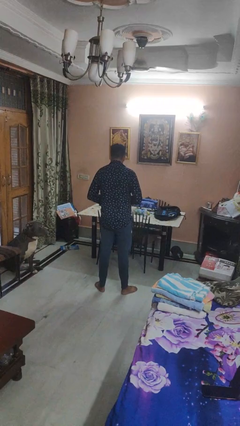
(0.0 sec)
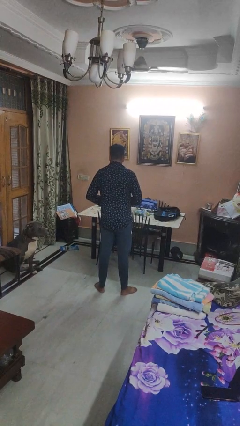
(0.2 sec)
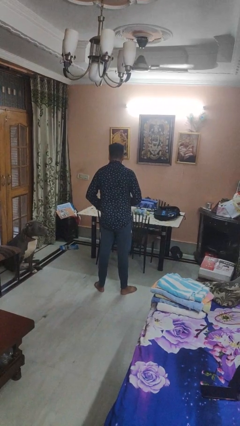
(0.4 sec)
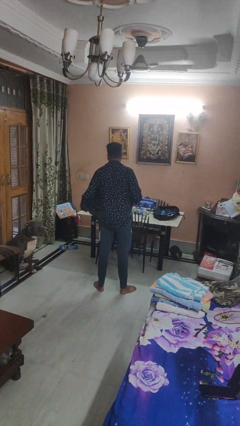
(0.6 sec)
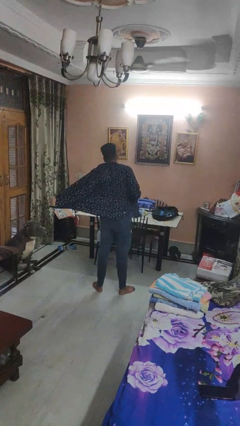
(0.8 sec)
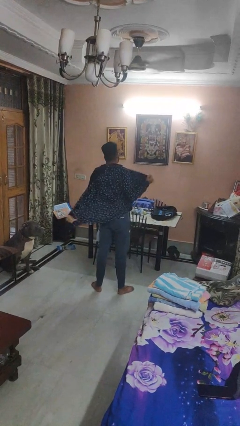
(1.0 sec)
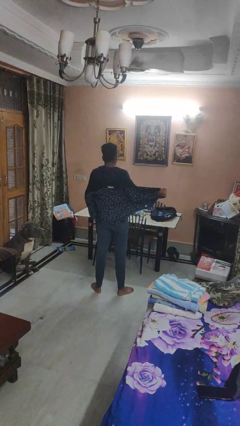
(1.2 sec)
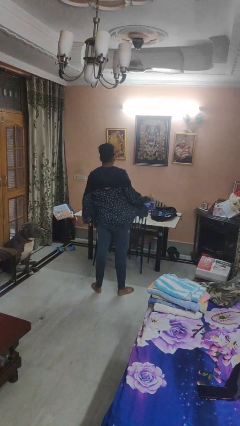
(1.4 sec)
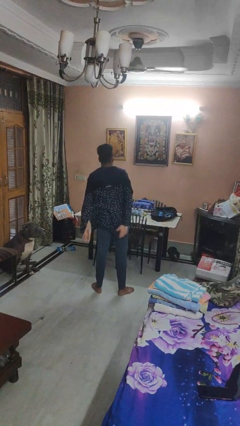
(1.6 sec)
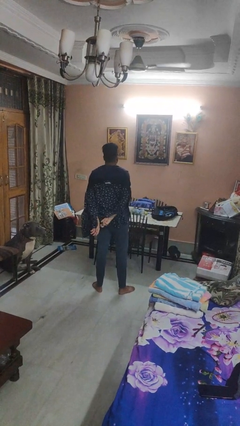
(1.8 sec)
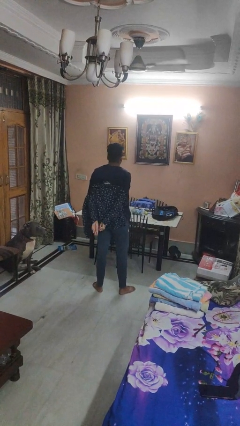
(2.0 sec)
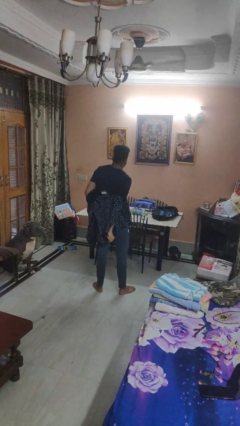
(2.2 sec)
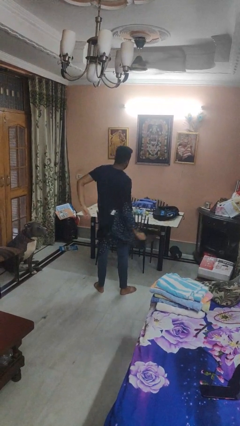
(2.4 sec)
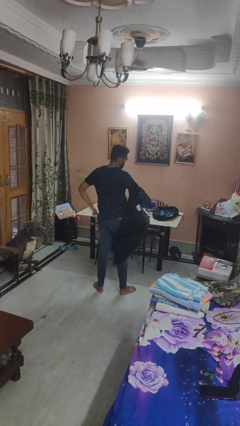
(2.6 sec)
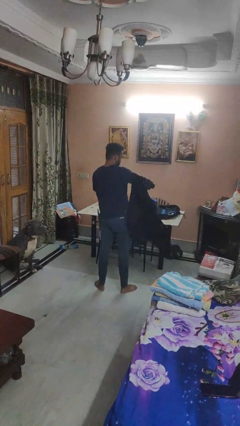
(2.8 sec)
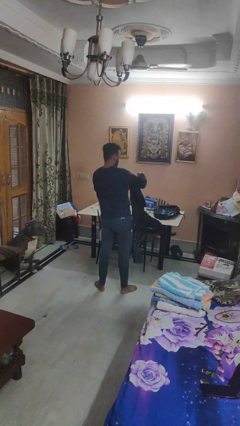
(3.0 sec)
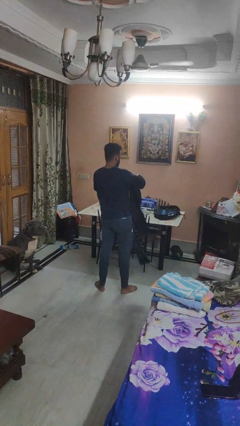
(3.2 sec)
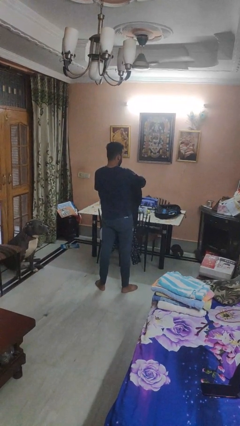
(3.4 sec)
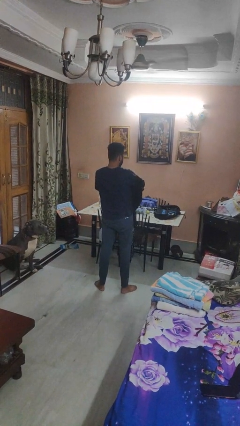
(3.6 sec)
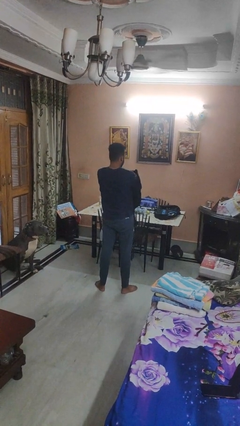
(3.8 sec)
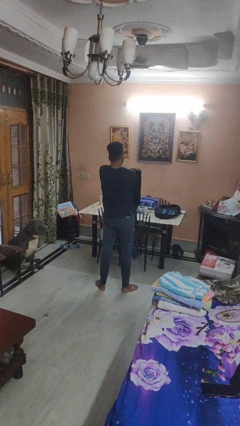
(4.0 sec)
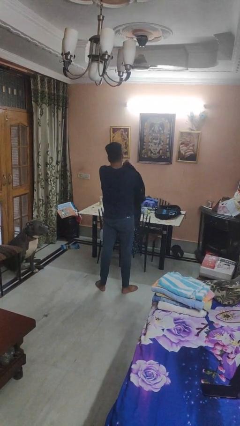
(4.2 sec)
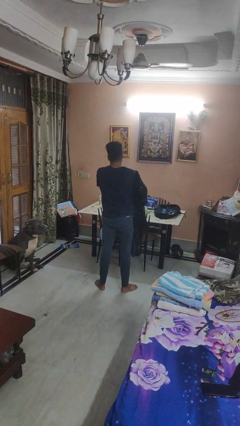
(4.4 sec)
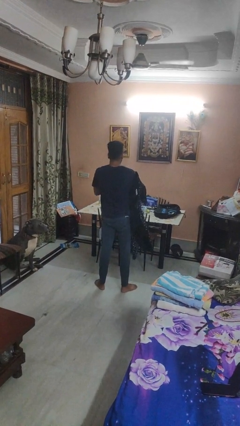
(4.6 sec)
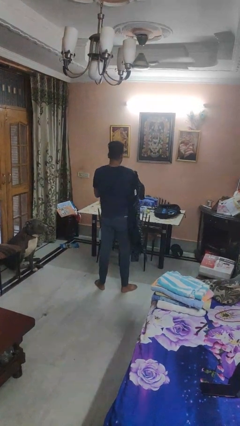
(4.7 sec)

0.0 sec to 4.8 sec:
person takes off shirt

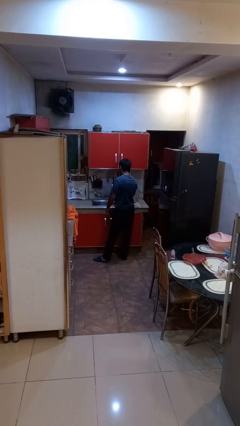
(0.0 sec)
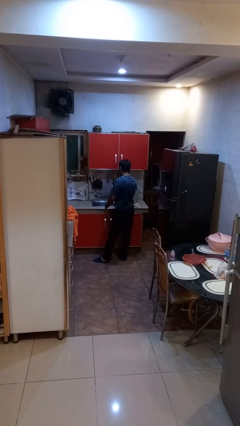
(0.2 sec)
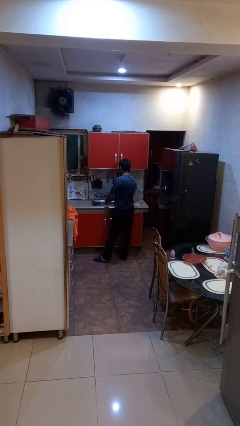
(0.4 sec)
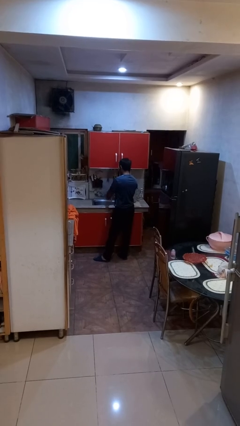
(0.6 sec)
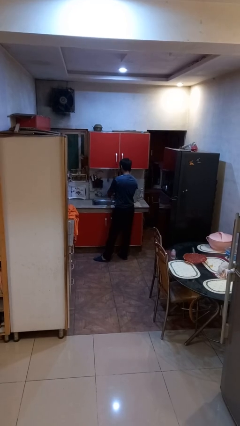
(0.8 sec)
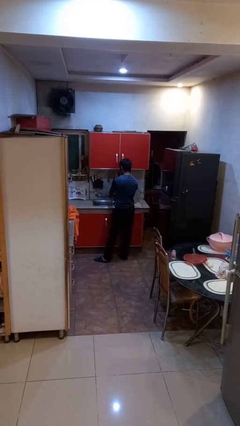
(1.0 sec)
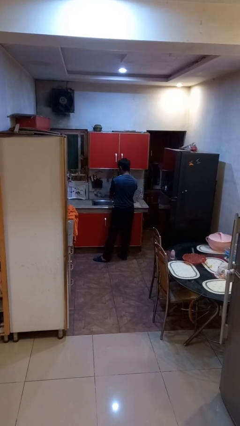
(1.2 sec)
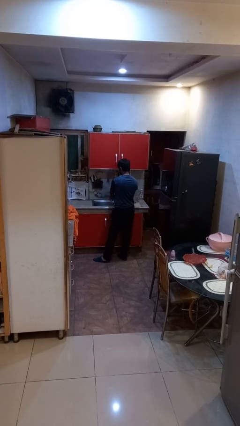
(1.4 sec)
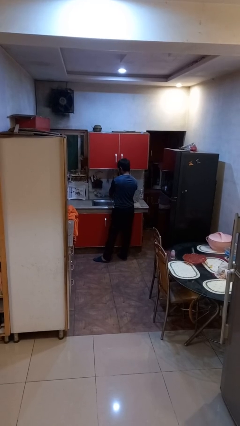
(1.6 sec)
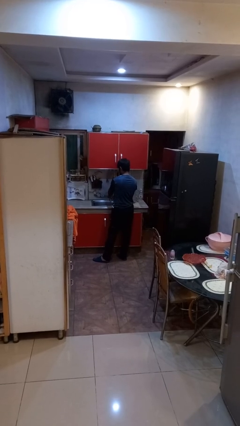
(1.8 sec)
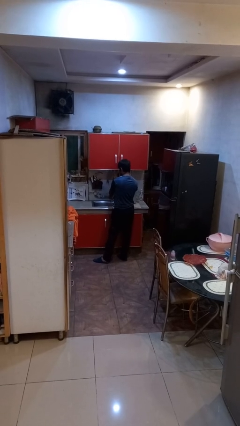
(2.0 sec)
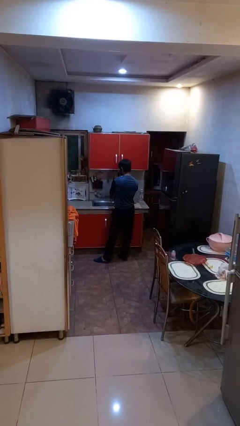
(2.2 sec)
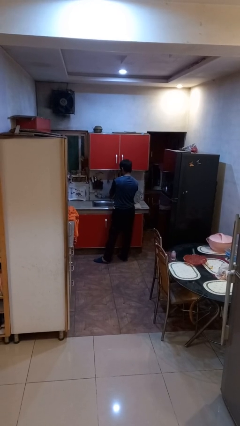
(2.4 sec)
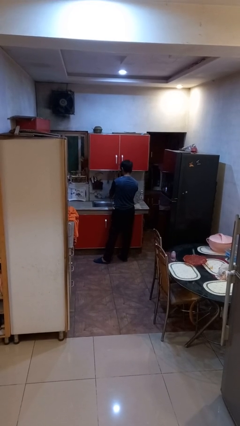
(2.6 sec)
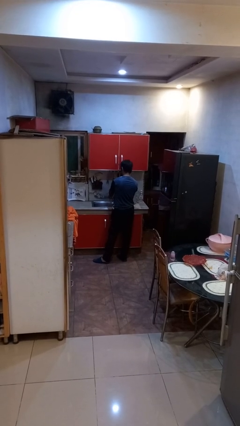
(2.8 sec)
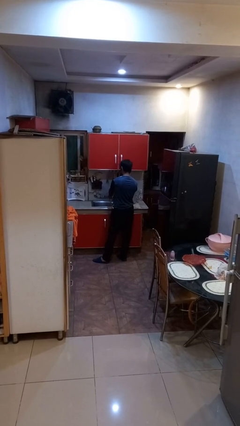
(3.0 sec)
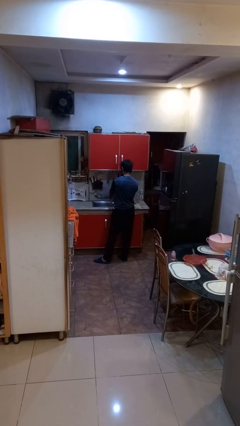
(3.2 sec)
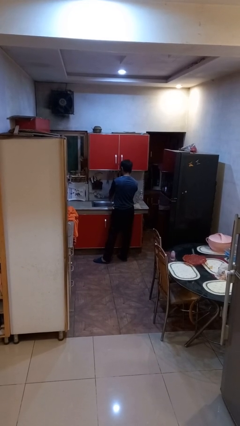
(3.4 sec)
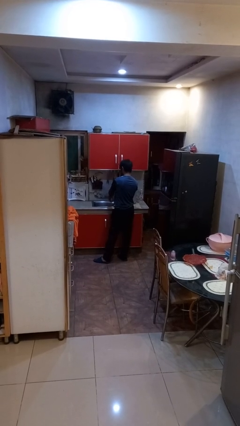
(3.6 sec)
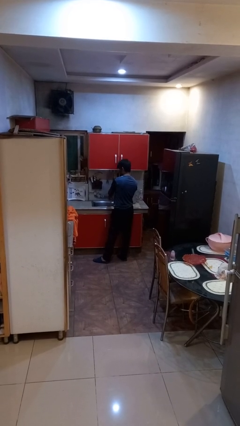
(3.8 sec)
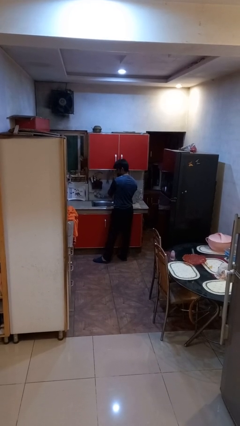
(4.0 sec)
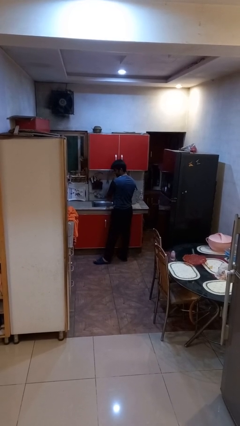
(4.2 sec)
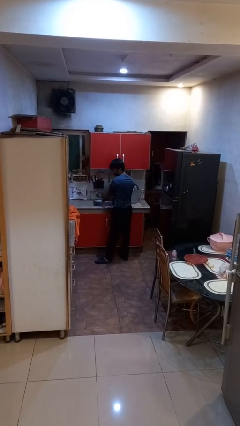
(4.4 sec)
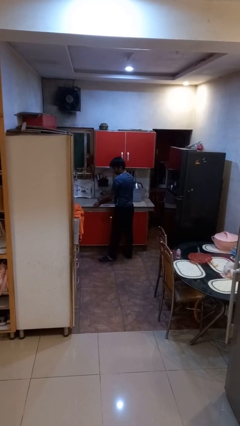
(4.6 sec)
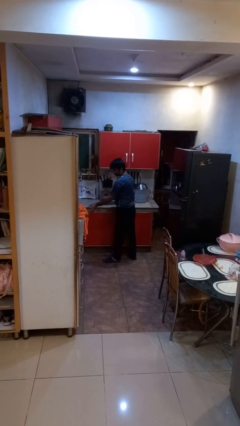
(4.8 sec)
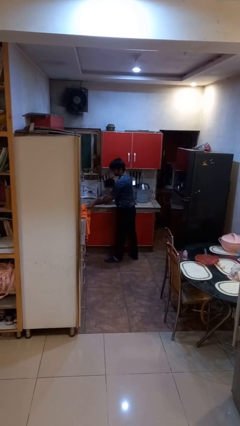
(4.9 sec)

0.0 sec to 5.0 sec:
person washes hands

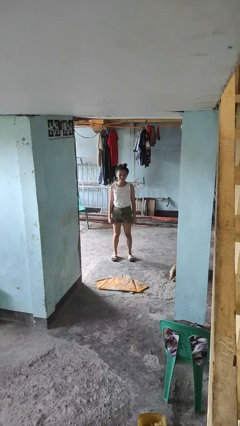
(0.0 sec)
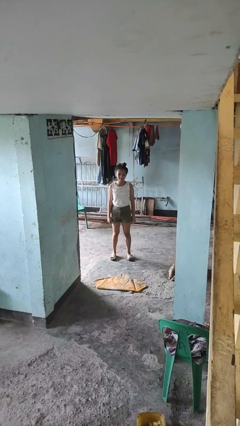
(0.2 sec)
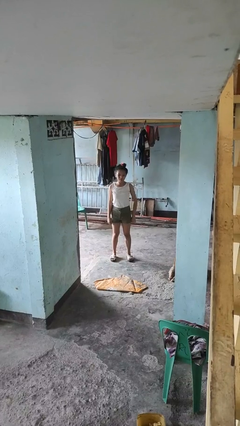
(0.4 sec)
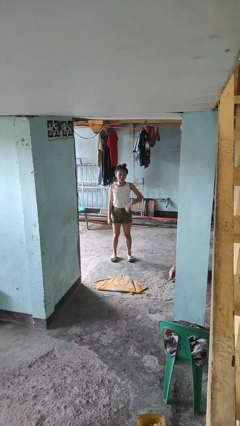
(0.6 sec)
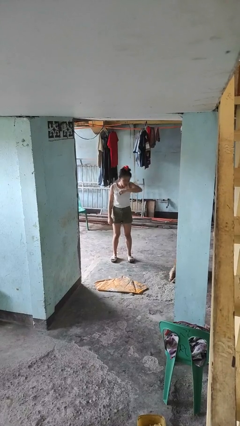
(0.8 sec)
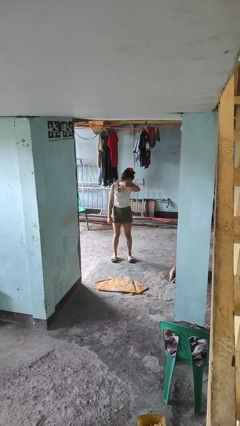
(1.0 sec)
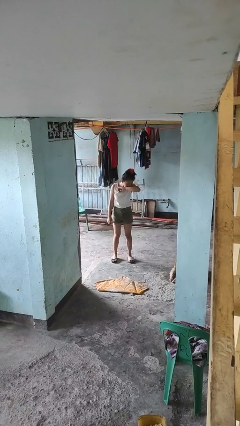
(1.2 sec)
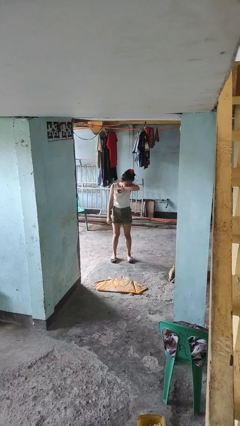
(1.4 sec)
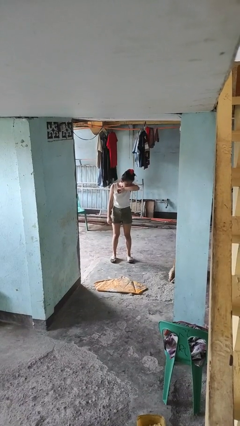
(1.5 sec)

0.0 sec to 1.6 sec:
person sneezes into arm

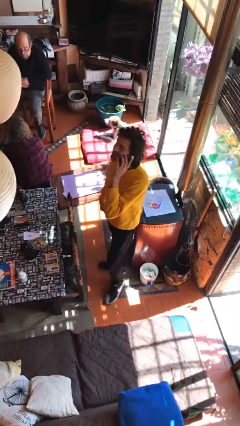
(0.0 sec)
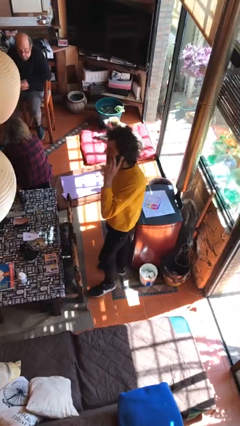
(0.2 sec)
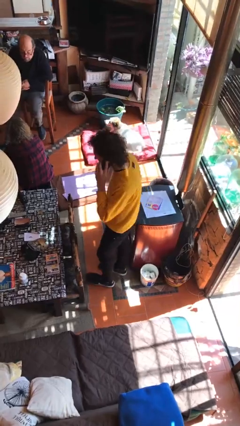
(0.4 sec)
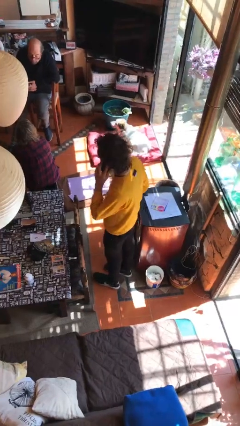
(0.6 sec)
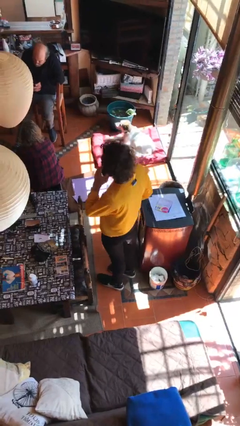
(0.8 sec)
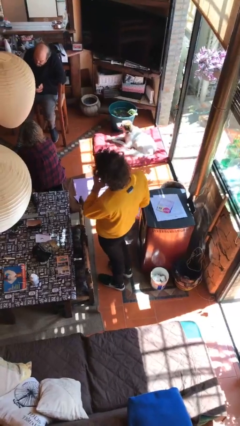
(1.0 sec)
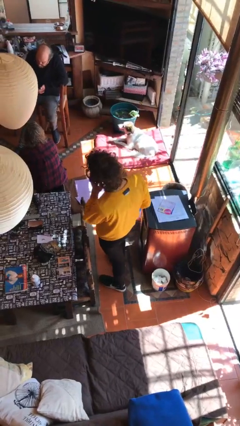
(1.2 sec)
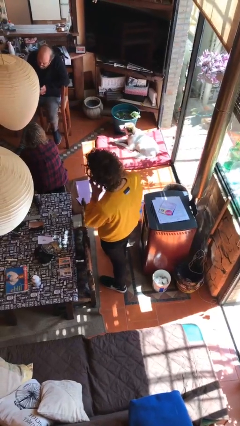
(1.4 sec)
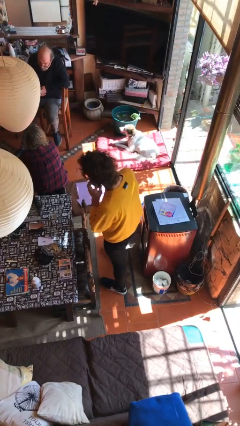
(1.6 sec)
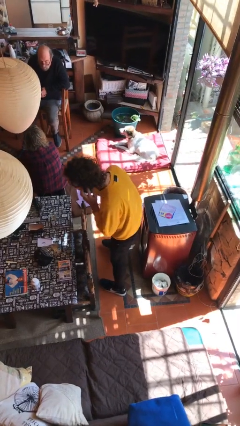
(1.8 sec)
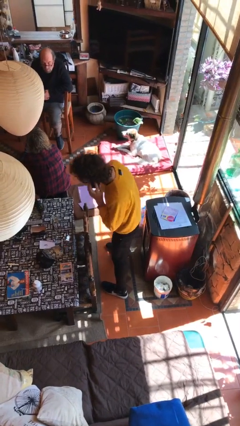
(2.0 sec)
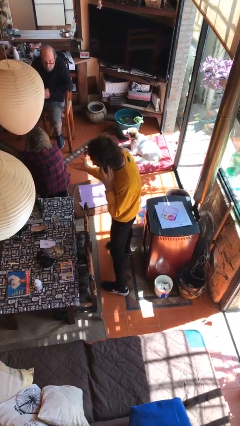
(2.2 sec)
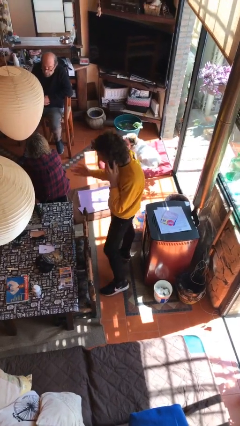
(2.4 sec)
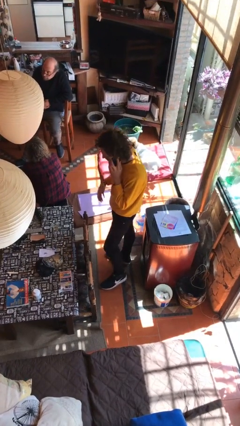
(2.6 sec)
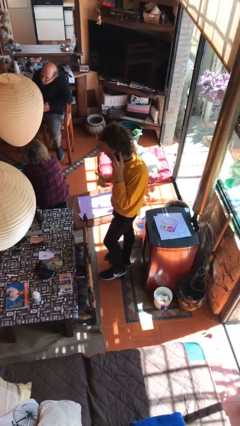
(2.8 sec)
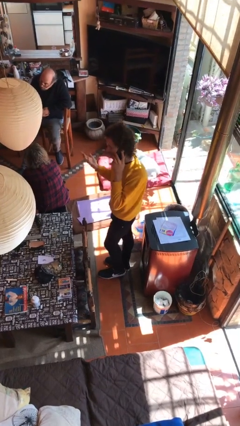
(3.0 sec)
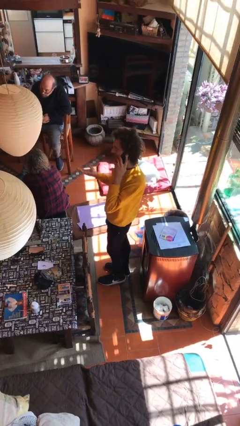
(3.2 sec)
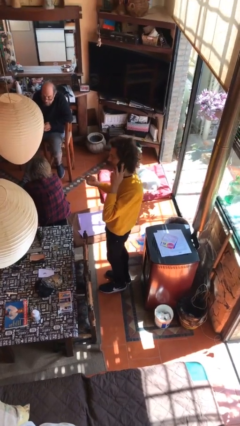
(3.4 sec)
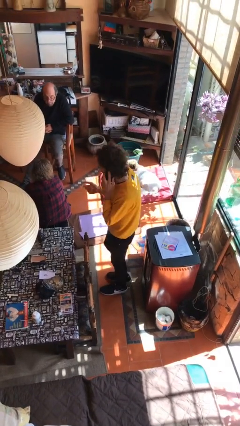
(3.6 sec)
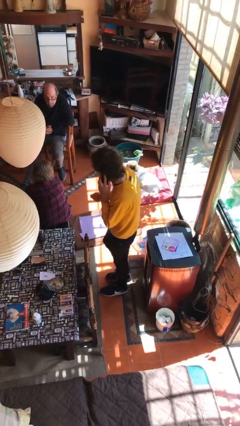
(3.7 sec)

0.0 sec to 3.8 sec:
person talks on phone

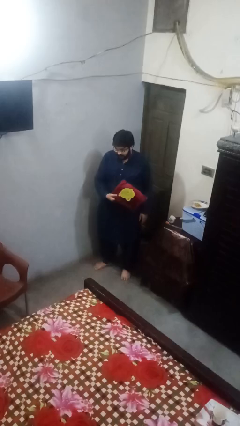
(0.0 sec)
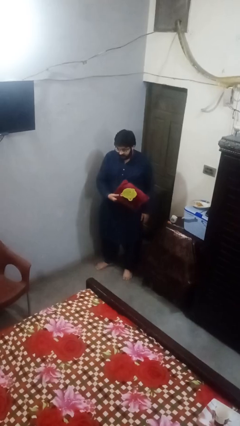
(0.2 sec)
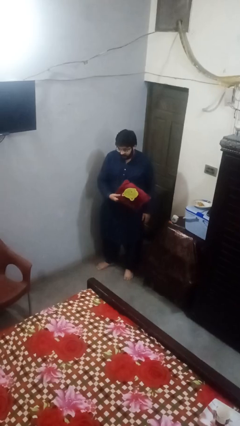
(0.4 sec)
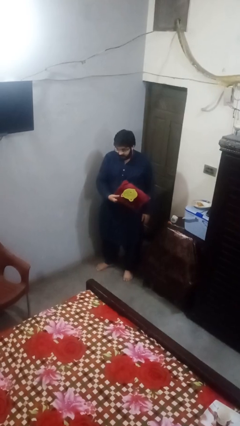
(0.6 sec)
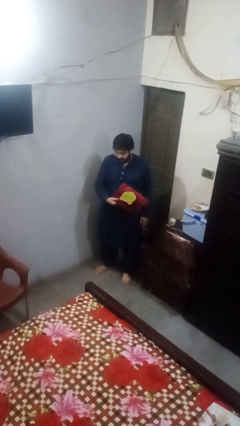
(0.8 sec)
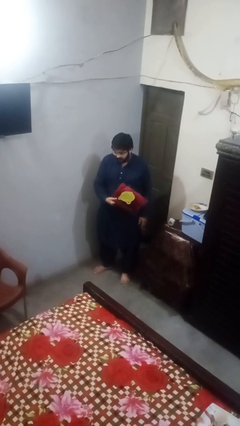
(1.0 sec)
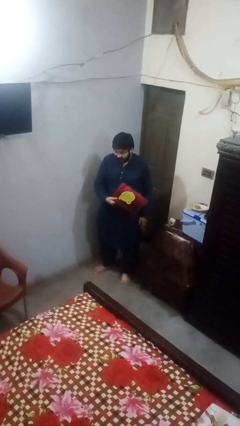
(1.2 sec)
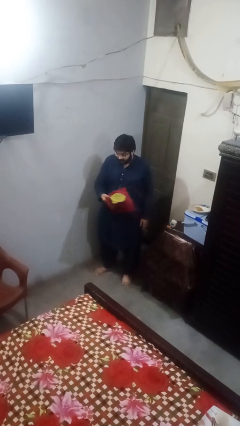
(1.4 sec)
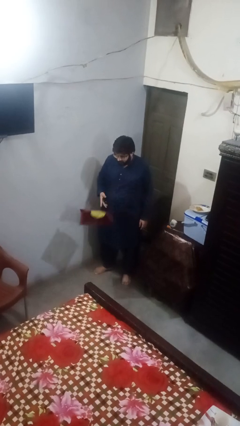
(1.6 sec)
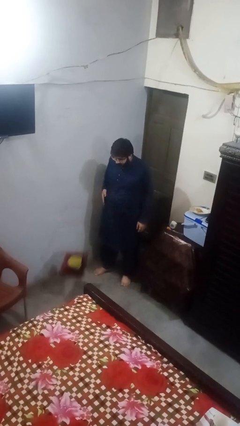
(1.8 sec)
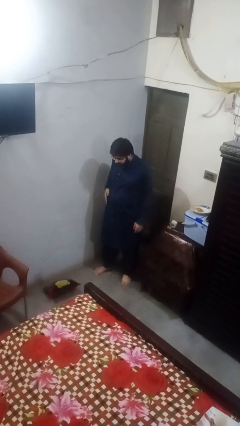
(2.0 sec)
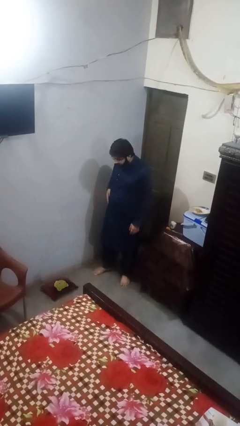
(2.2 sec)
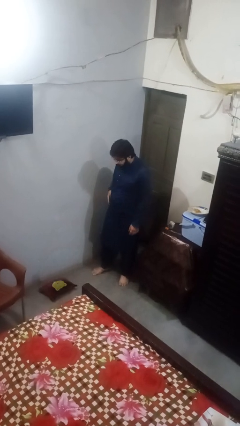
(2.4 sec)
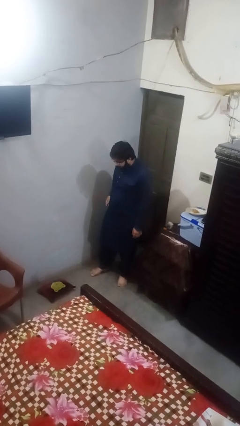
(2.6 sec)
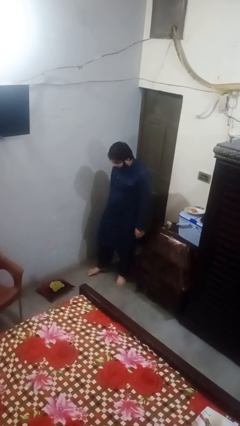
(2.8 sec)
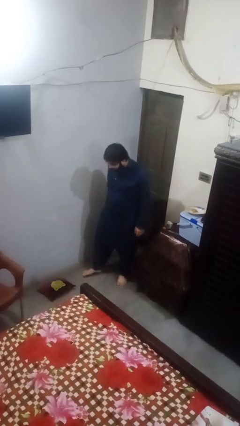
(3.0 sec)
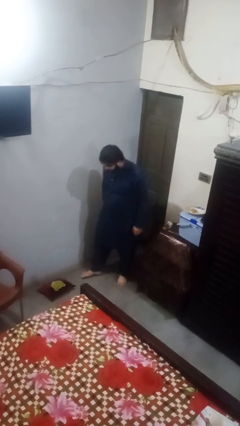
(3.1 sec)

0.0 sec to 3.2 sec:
person throws object to ground
